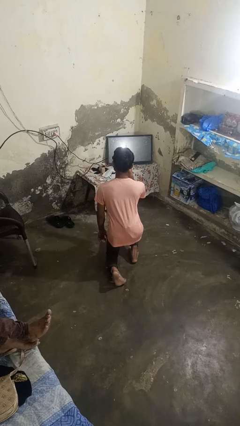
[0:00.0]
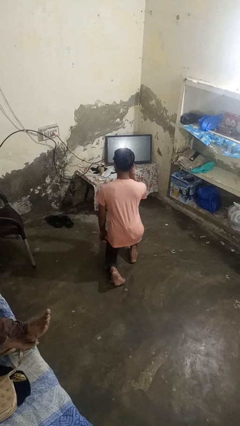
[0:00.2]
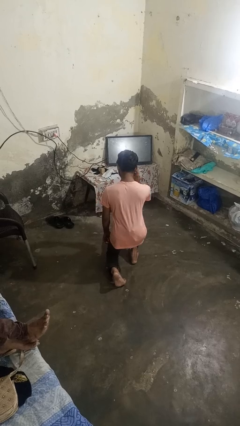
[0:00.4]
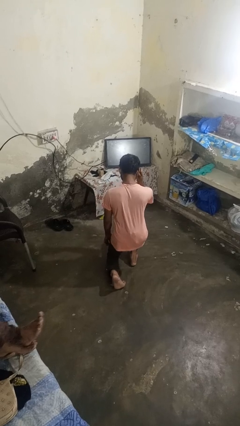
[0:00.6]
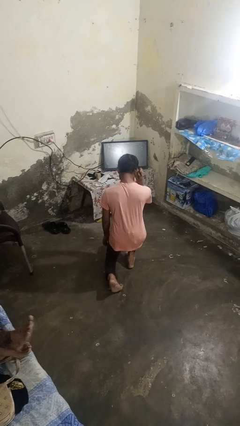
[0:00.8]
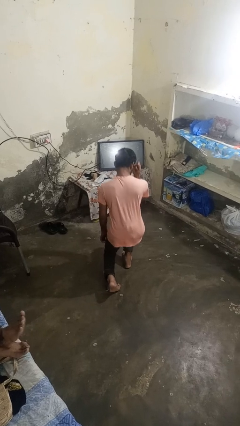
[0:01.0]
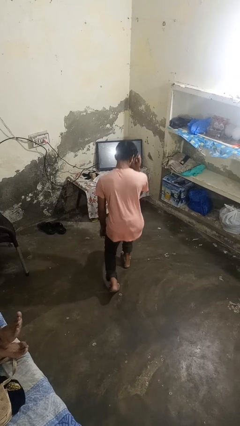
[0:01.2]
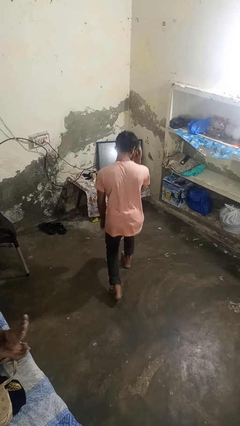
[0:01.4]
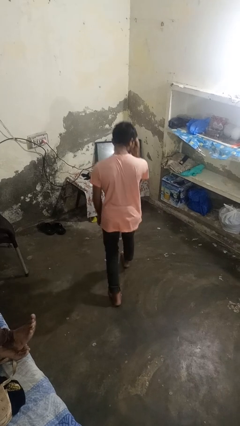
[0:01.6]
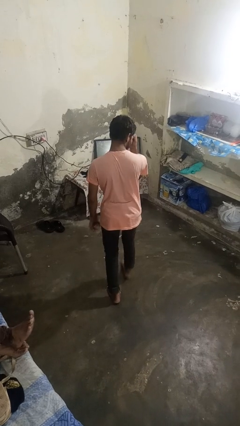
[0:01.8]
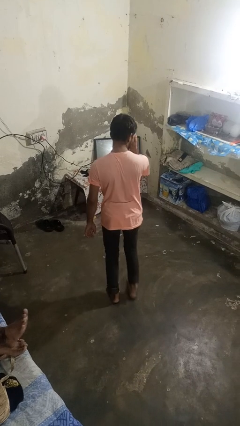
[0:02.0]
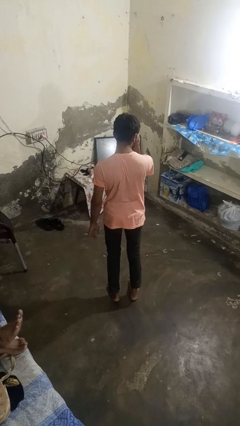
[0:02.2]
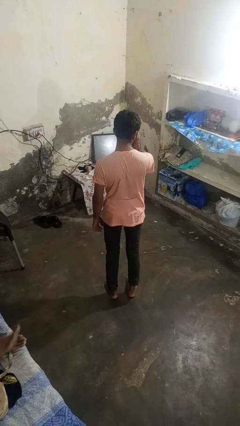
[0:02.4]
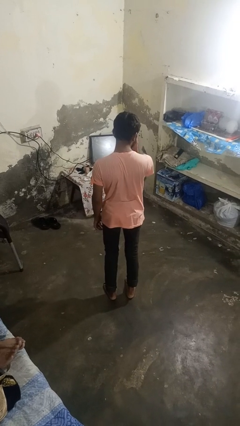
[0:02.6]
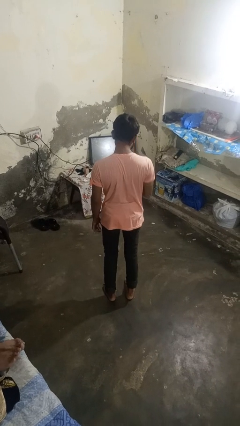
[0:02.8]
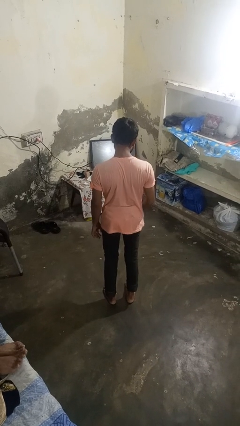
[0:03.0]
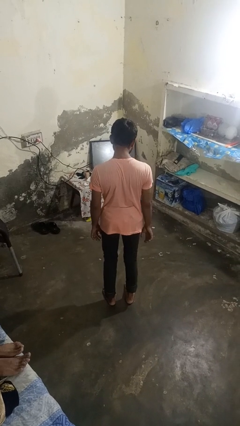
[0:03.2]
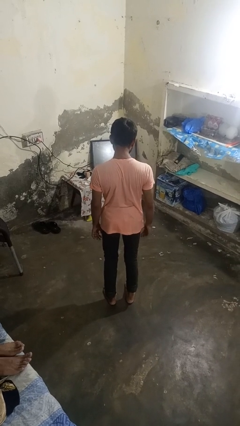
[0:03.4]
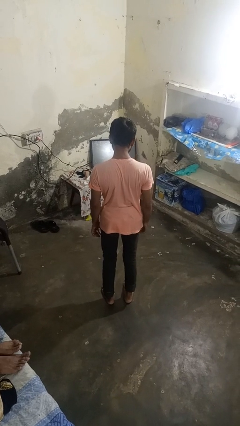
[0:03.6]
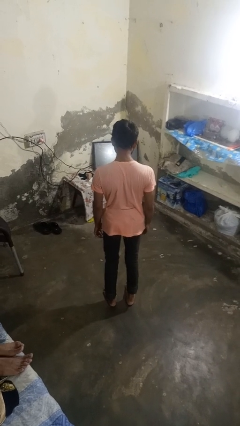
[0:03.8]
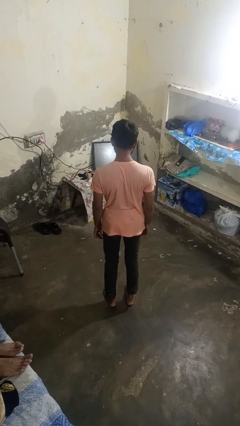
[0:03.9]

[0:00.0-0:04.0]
person stands up from floor

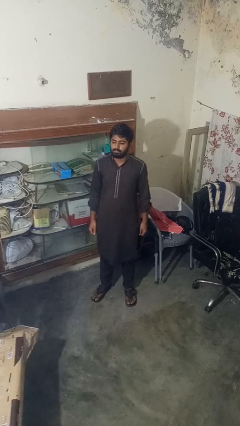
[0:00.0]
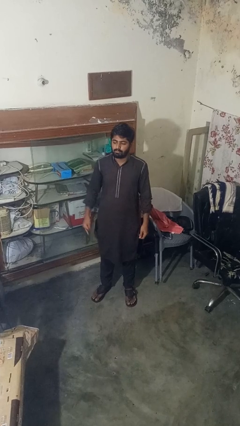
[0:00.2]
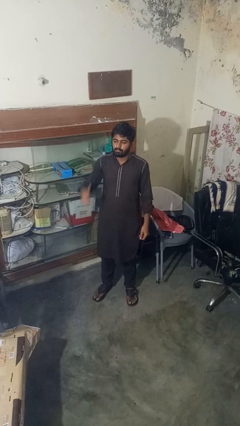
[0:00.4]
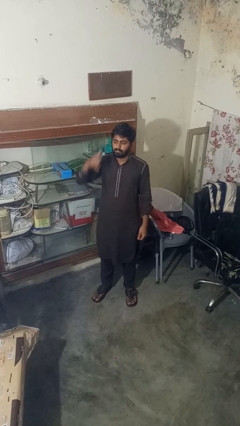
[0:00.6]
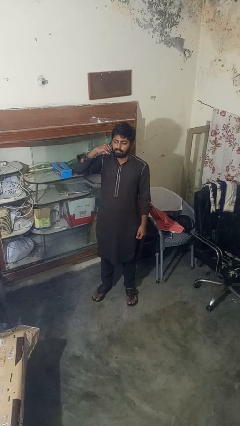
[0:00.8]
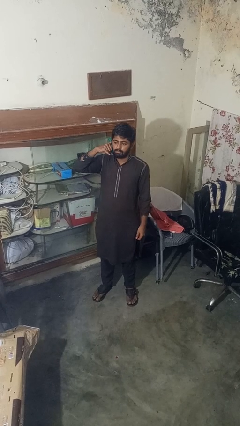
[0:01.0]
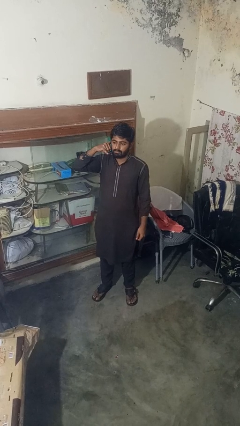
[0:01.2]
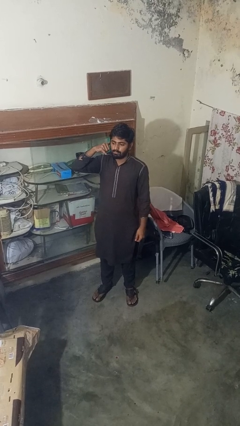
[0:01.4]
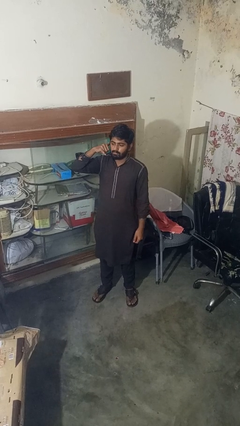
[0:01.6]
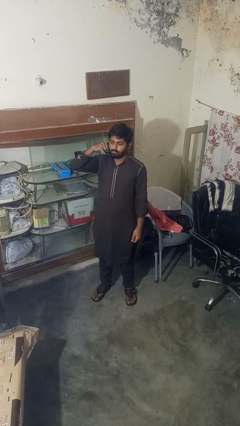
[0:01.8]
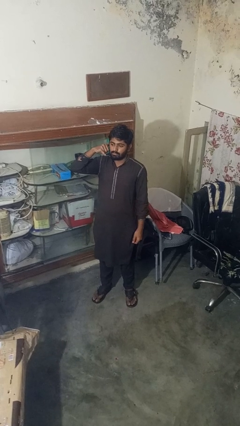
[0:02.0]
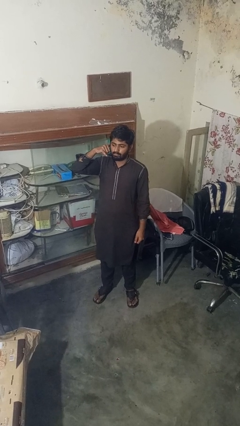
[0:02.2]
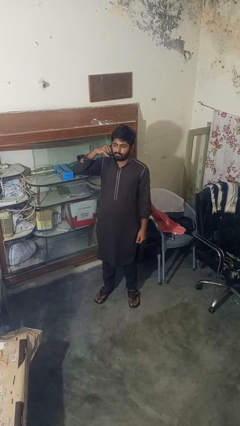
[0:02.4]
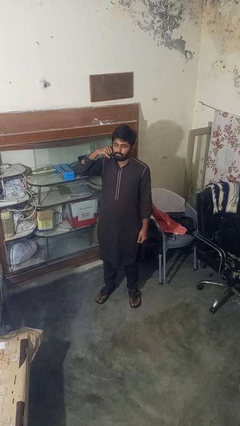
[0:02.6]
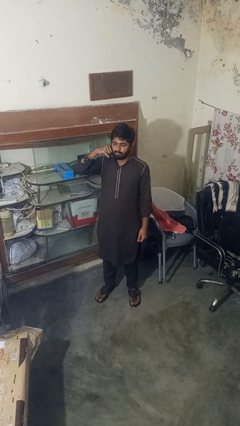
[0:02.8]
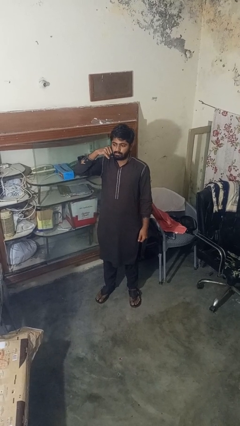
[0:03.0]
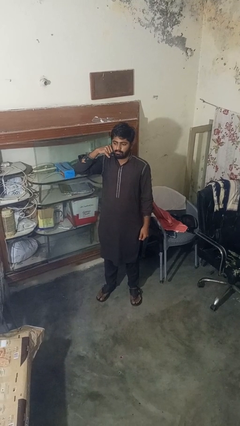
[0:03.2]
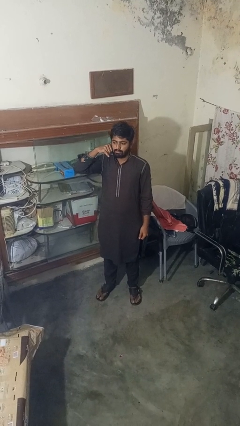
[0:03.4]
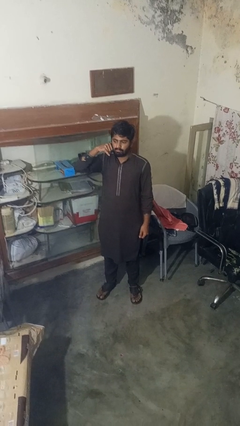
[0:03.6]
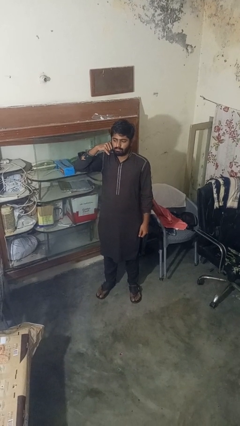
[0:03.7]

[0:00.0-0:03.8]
person gestures call me

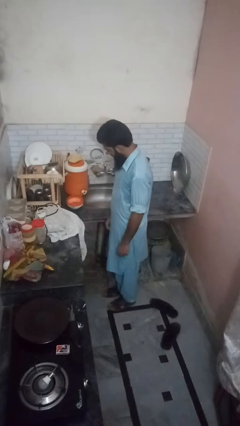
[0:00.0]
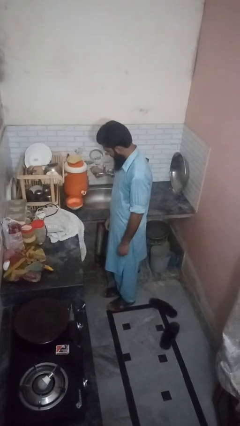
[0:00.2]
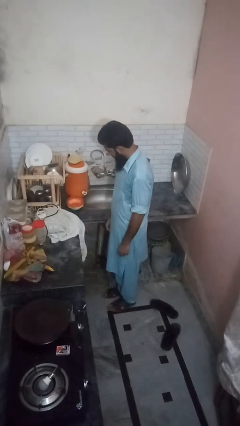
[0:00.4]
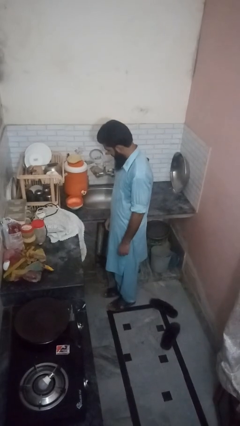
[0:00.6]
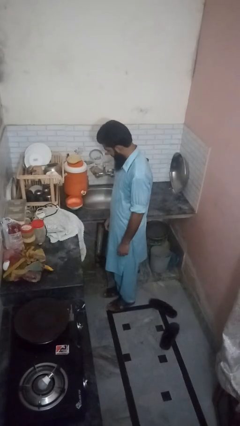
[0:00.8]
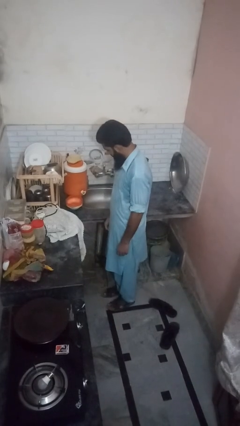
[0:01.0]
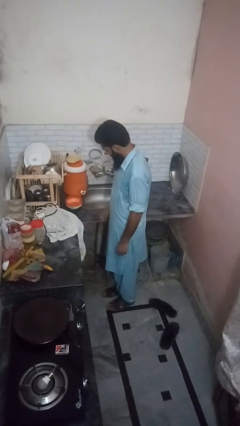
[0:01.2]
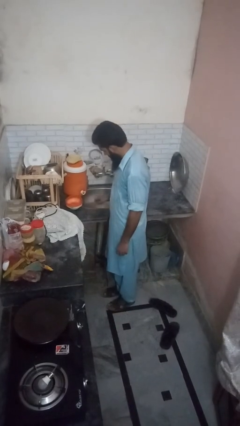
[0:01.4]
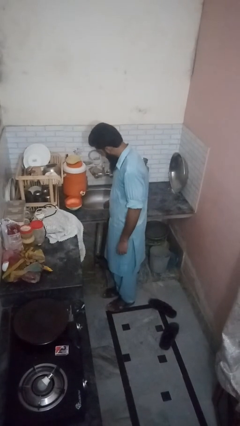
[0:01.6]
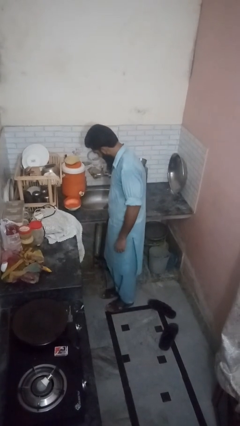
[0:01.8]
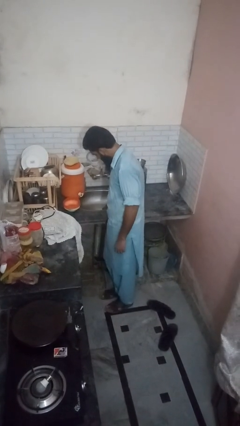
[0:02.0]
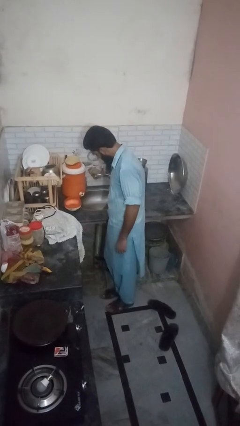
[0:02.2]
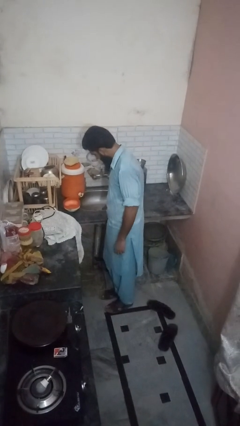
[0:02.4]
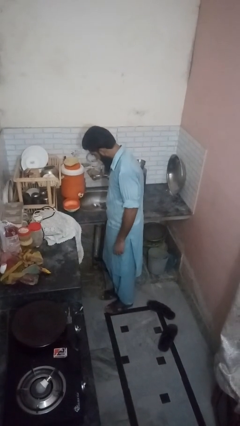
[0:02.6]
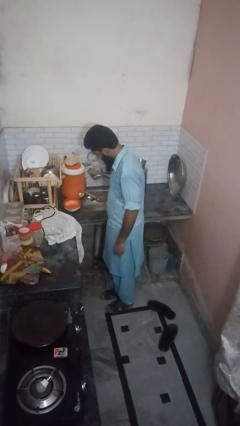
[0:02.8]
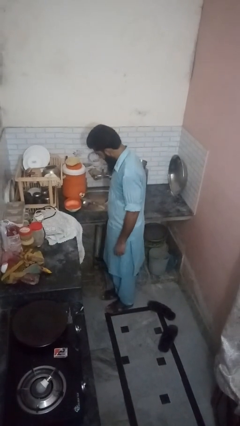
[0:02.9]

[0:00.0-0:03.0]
person unloads dishwasher

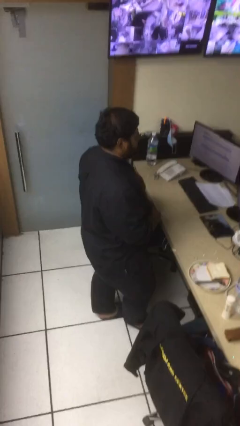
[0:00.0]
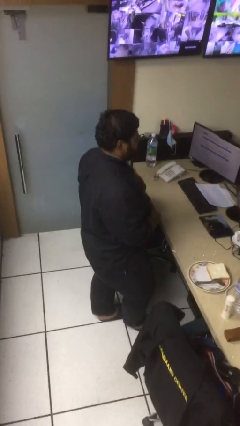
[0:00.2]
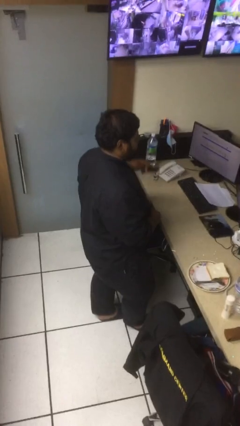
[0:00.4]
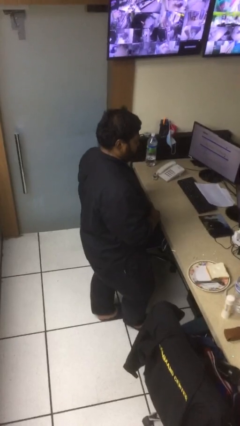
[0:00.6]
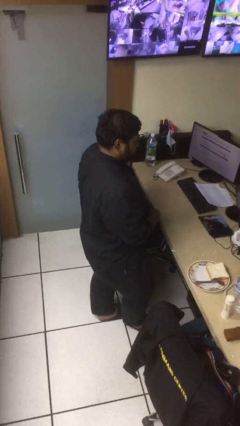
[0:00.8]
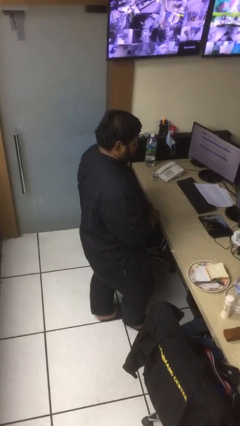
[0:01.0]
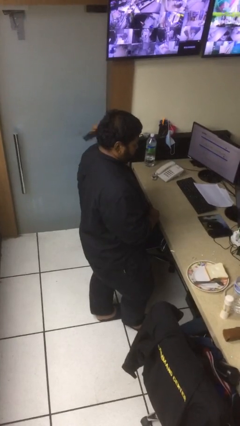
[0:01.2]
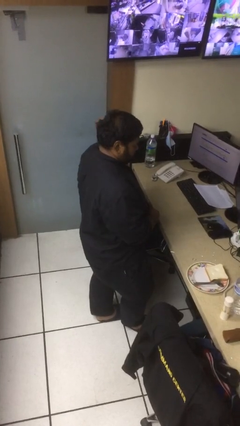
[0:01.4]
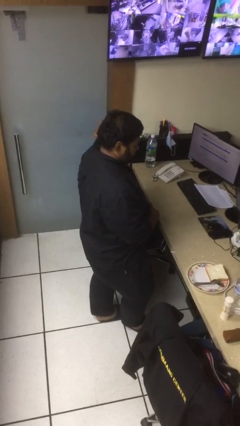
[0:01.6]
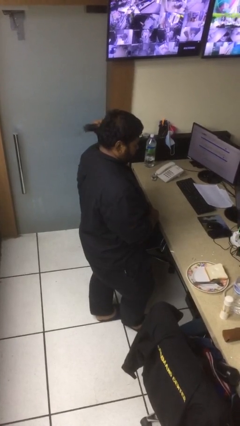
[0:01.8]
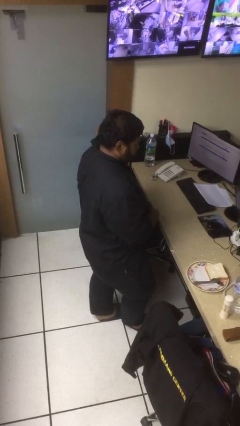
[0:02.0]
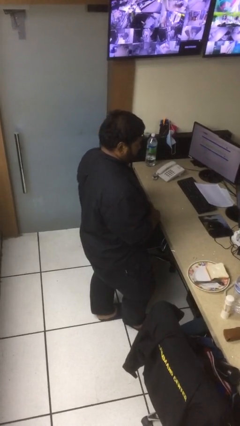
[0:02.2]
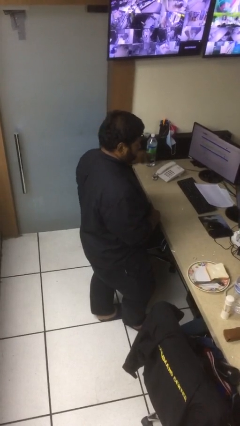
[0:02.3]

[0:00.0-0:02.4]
person brushes hair

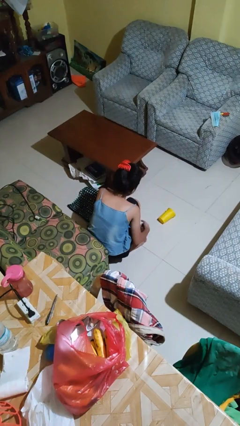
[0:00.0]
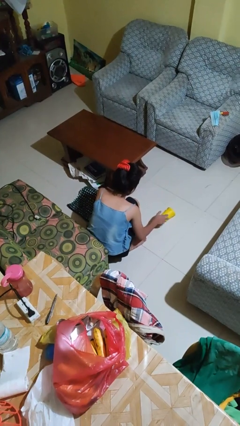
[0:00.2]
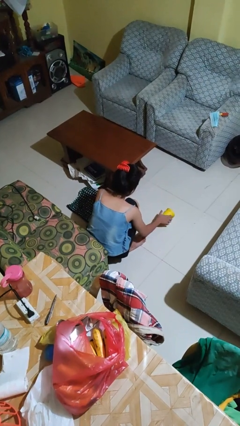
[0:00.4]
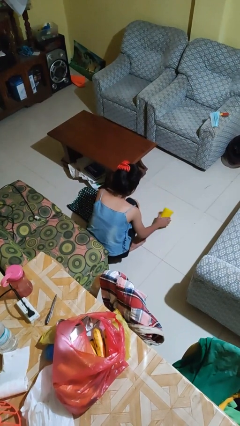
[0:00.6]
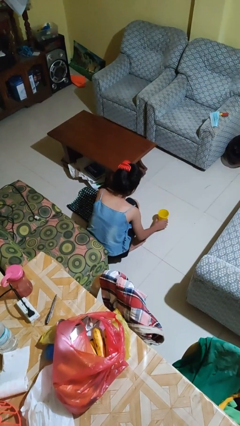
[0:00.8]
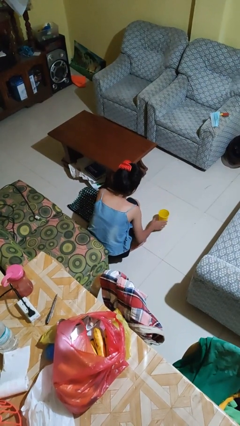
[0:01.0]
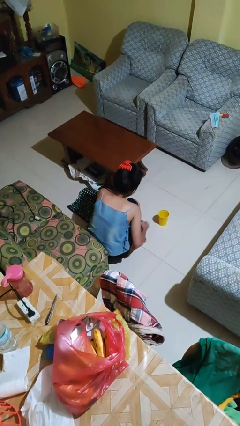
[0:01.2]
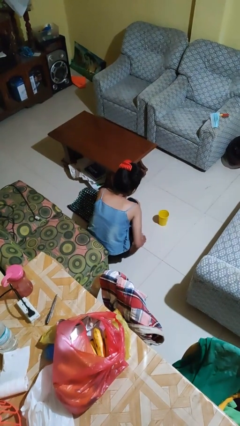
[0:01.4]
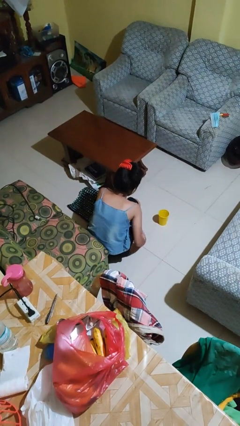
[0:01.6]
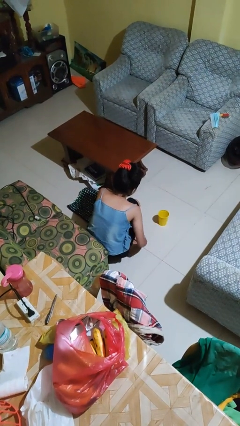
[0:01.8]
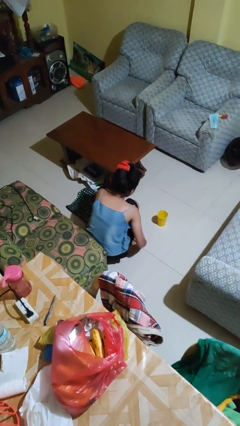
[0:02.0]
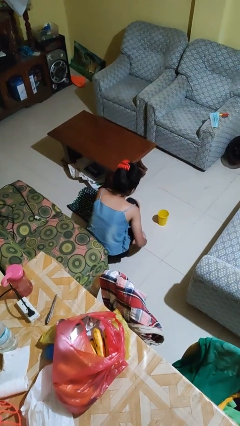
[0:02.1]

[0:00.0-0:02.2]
person sets upright glass

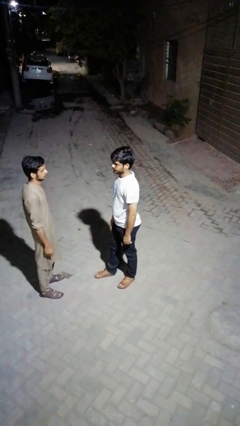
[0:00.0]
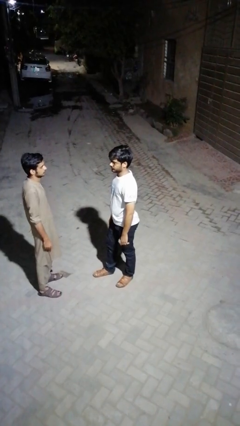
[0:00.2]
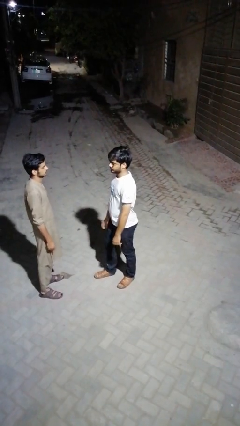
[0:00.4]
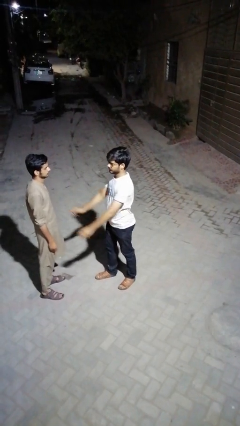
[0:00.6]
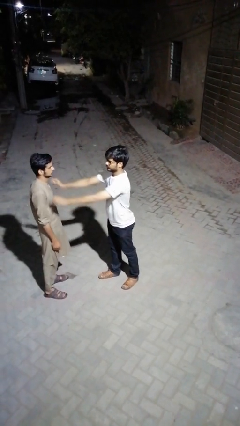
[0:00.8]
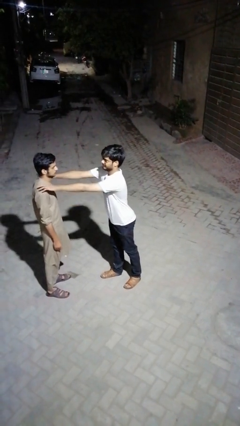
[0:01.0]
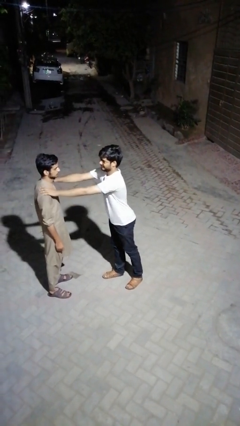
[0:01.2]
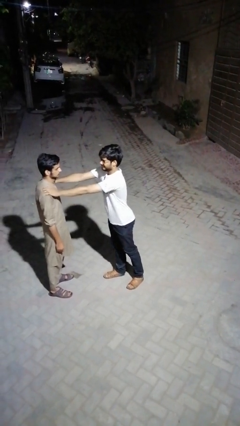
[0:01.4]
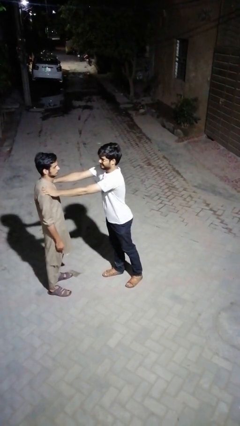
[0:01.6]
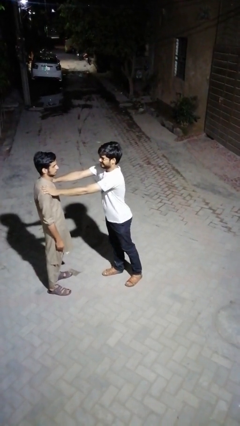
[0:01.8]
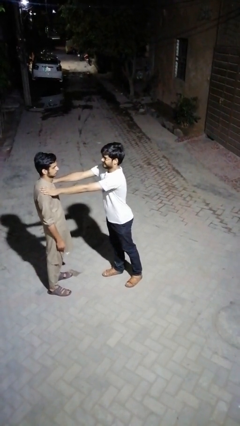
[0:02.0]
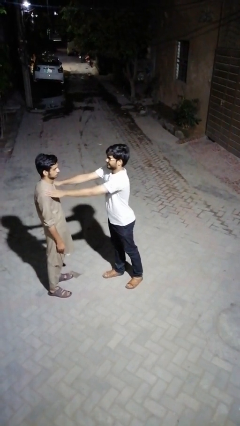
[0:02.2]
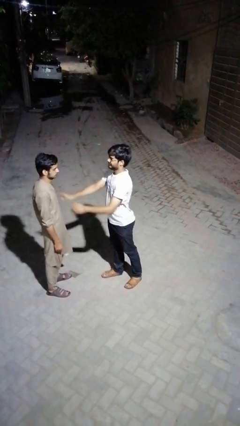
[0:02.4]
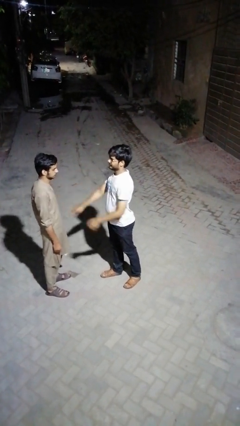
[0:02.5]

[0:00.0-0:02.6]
person pounds shoulders of person
